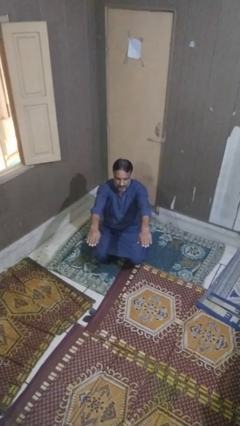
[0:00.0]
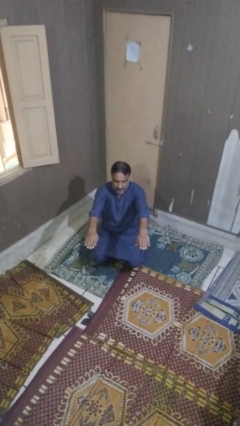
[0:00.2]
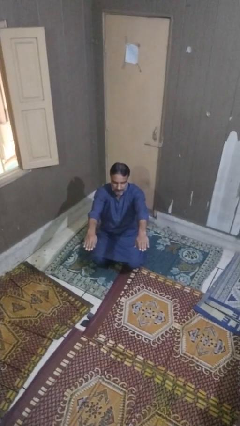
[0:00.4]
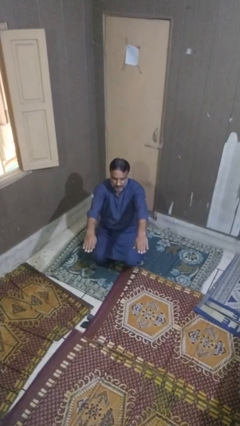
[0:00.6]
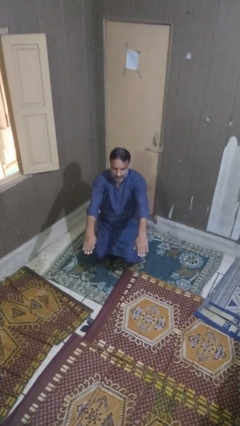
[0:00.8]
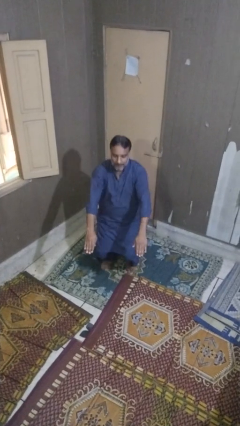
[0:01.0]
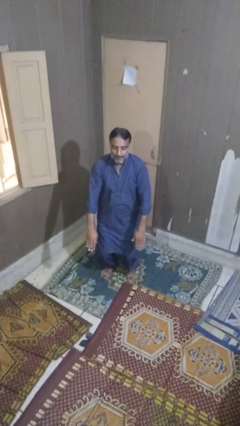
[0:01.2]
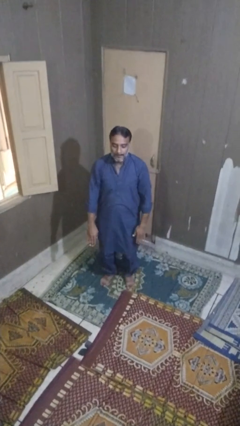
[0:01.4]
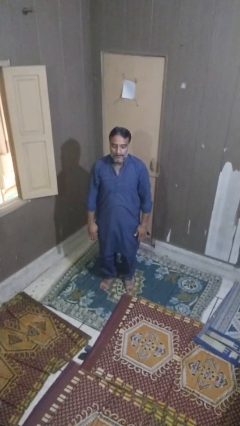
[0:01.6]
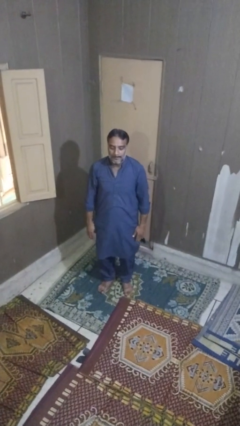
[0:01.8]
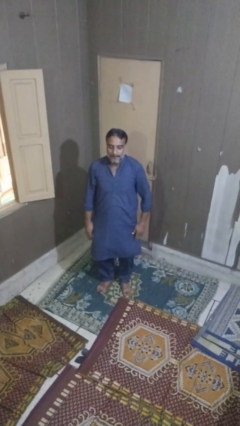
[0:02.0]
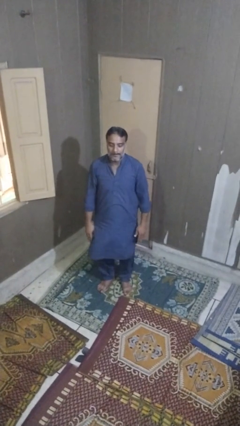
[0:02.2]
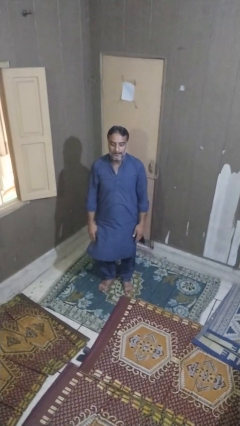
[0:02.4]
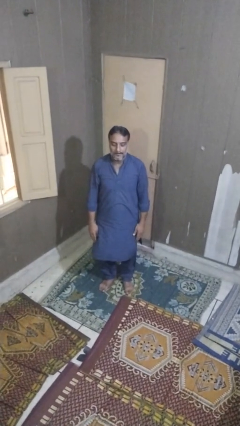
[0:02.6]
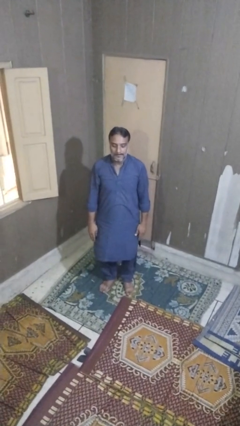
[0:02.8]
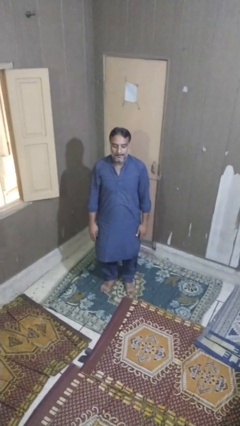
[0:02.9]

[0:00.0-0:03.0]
person stands up

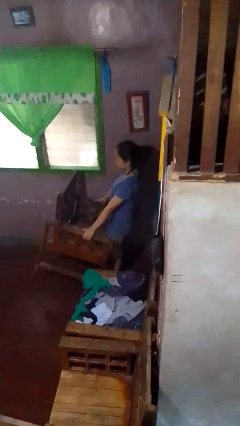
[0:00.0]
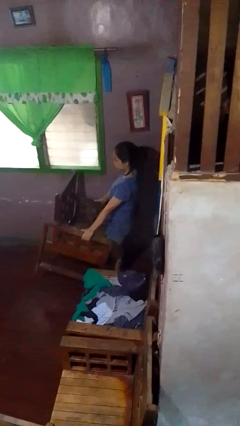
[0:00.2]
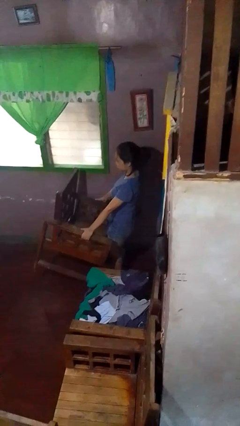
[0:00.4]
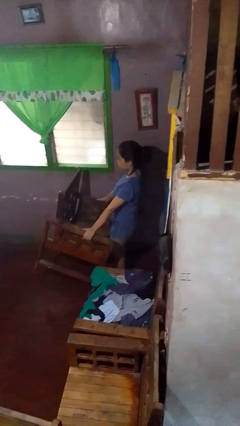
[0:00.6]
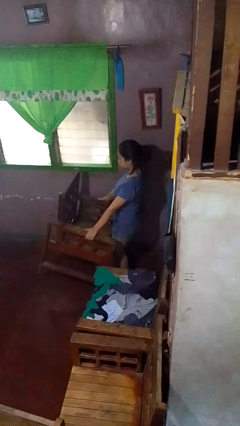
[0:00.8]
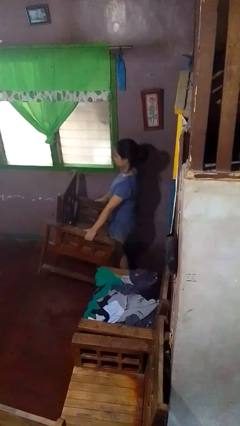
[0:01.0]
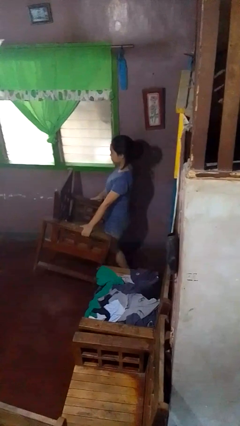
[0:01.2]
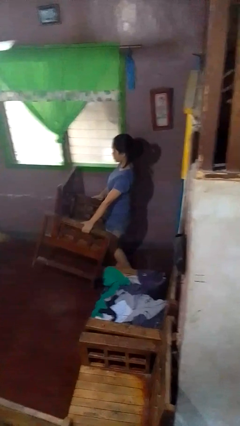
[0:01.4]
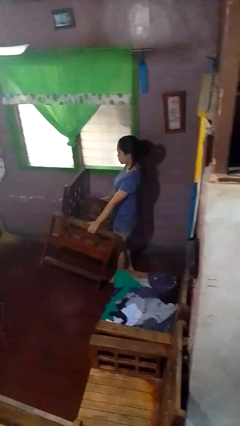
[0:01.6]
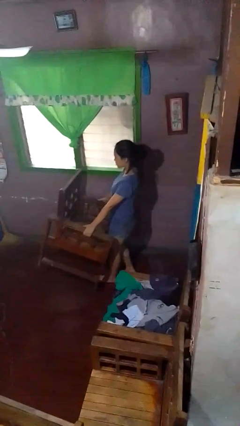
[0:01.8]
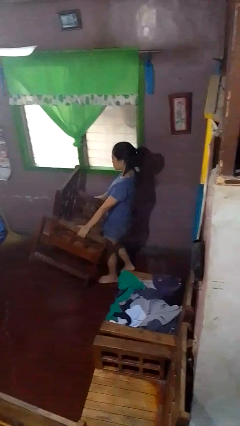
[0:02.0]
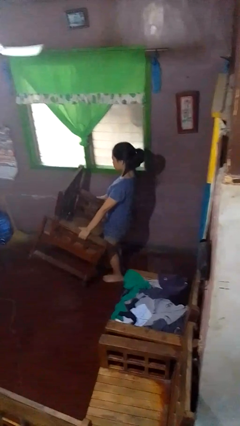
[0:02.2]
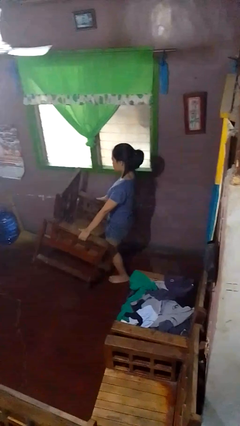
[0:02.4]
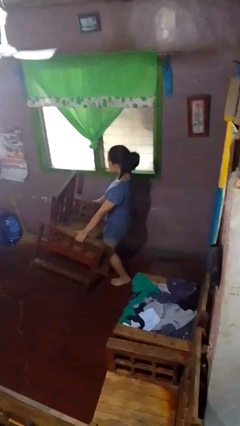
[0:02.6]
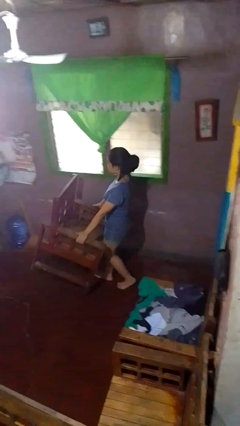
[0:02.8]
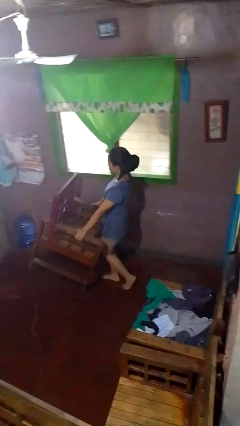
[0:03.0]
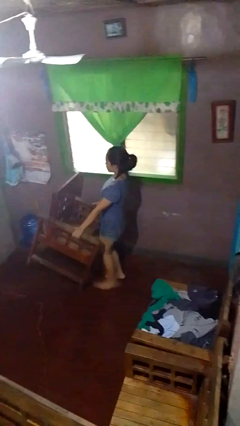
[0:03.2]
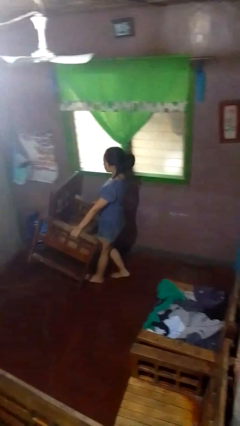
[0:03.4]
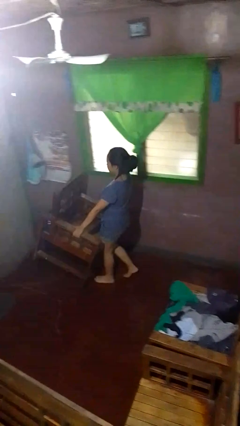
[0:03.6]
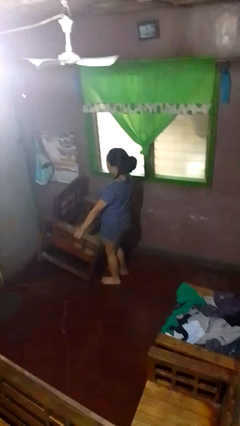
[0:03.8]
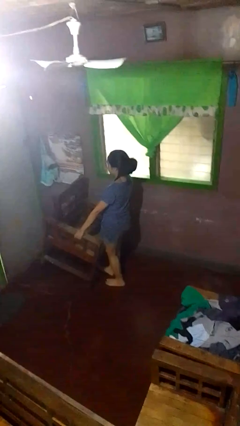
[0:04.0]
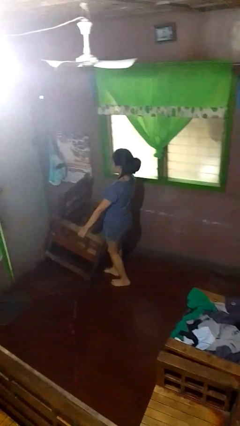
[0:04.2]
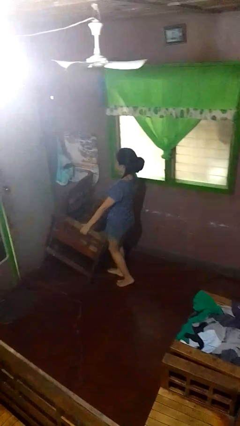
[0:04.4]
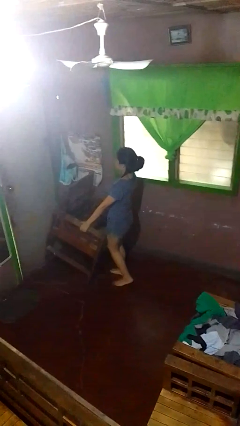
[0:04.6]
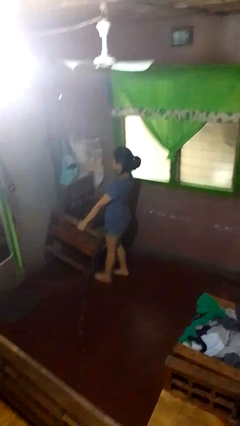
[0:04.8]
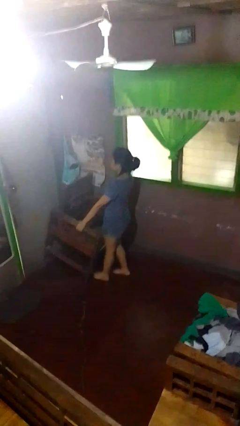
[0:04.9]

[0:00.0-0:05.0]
person carries furniture

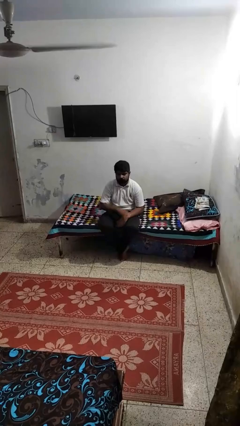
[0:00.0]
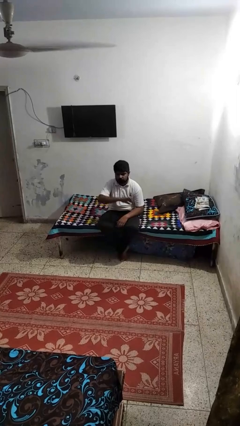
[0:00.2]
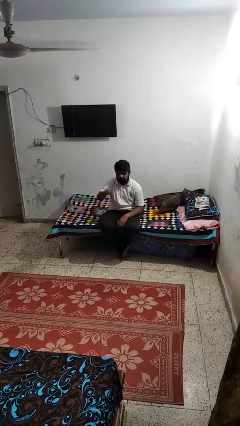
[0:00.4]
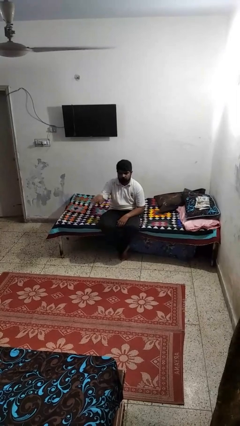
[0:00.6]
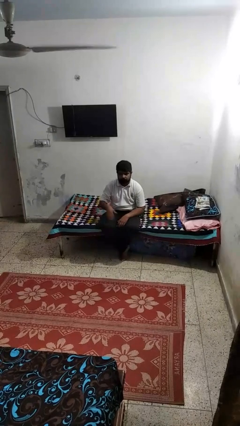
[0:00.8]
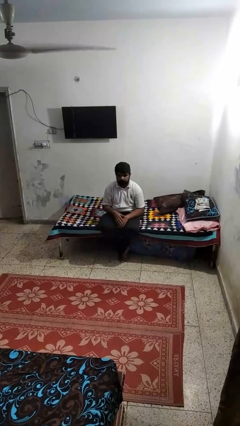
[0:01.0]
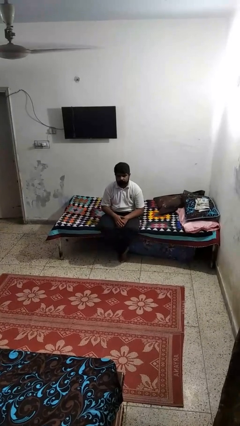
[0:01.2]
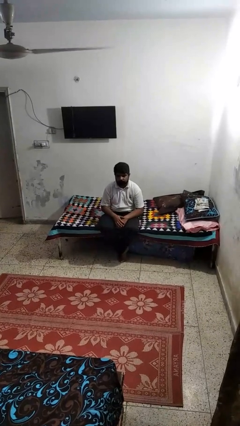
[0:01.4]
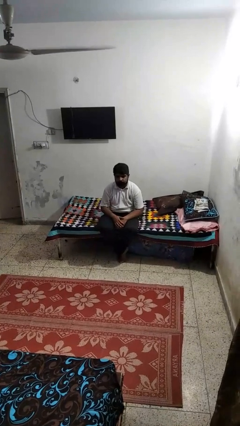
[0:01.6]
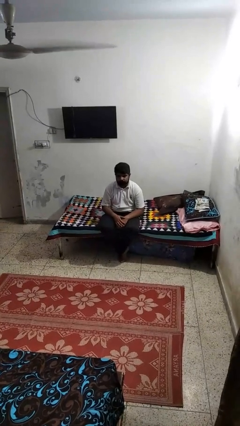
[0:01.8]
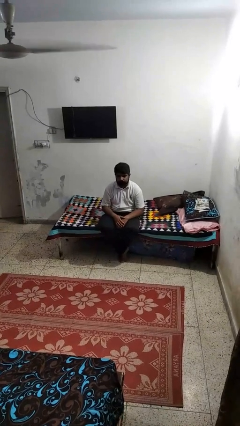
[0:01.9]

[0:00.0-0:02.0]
person gestures swipe right

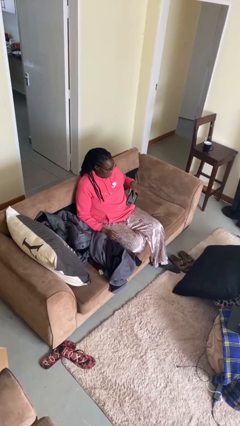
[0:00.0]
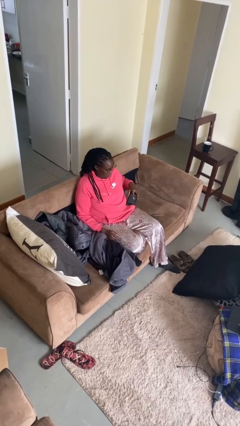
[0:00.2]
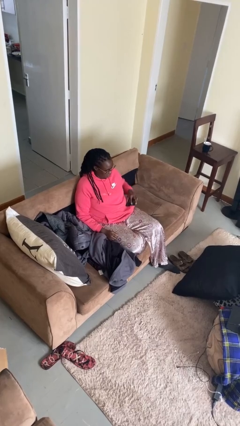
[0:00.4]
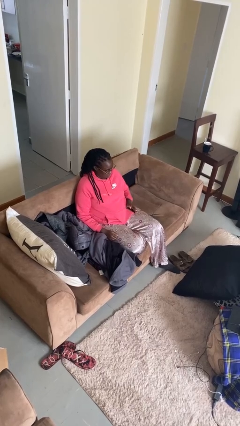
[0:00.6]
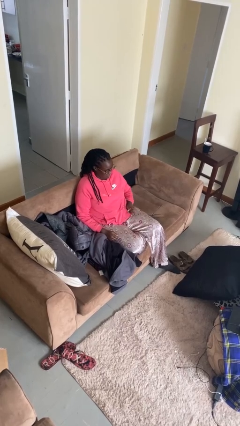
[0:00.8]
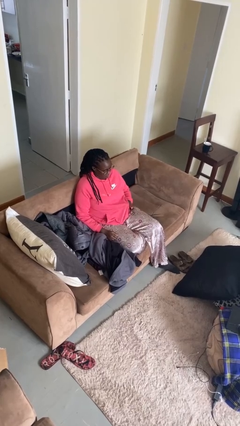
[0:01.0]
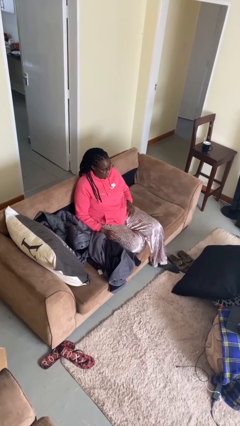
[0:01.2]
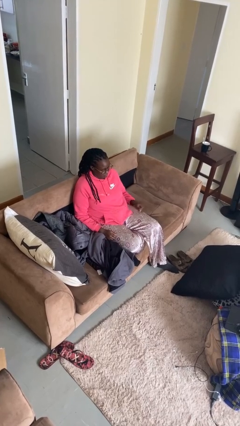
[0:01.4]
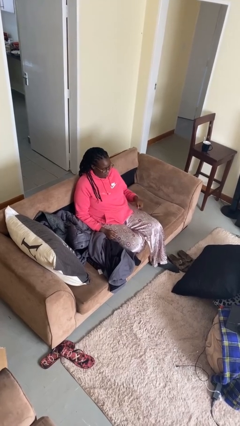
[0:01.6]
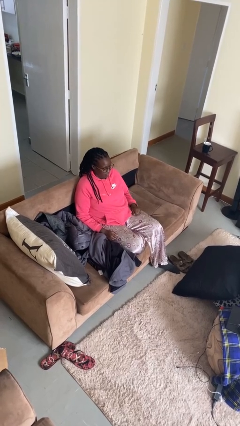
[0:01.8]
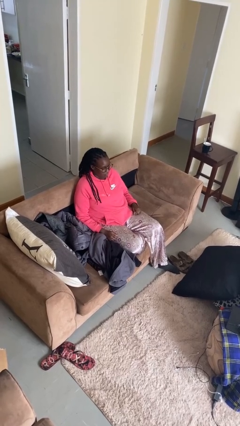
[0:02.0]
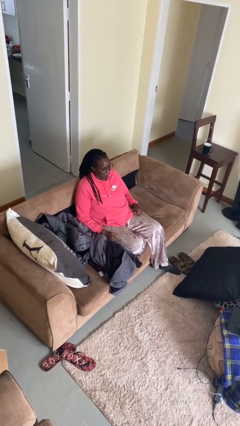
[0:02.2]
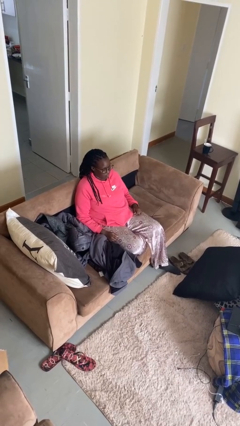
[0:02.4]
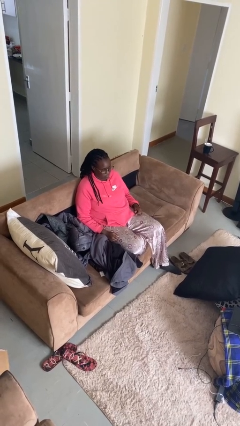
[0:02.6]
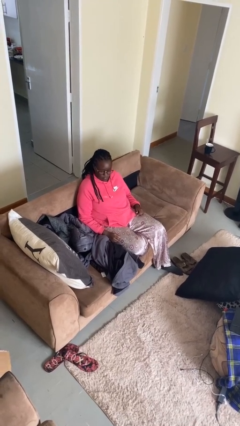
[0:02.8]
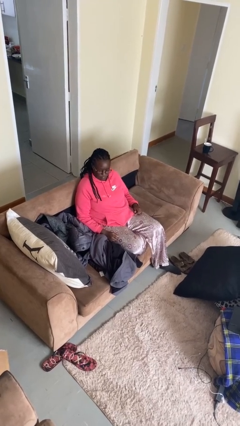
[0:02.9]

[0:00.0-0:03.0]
person puts phone into pocket

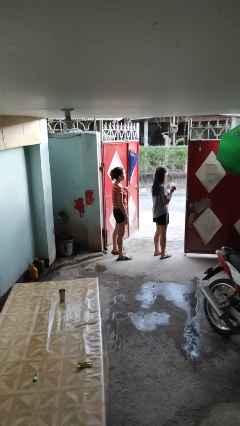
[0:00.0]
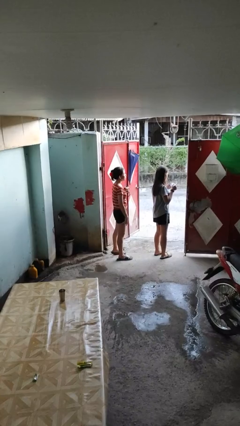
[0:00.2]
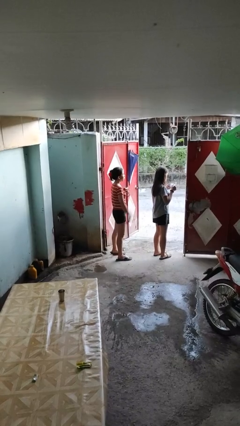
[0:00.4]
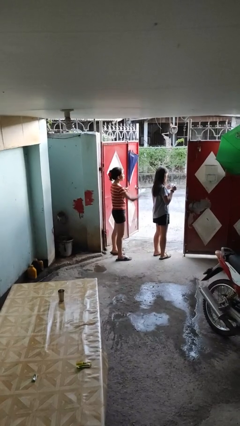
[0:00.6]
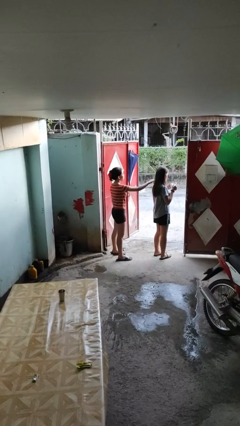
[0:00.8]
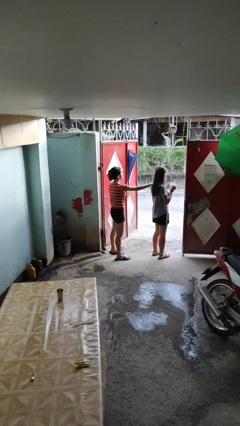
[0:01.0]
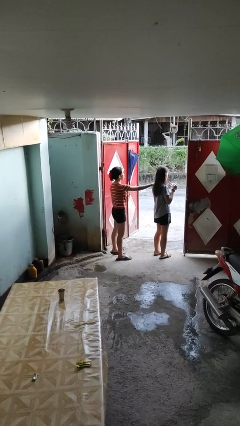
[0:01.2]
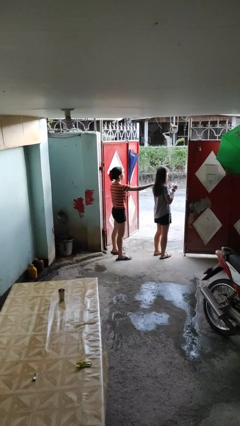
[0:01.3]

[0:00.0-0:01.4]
person grabs person by shoulder

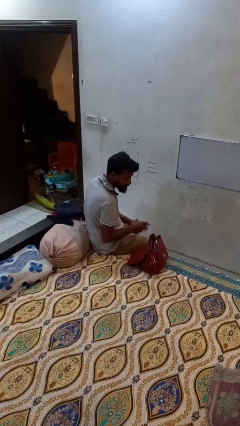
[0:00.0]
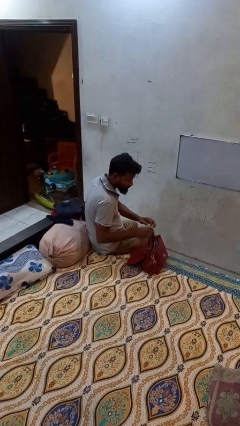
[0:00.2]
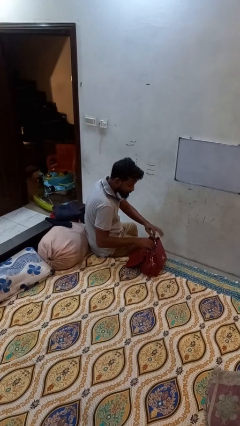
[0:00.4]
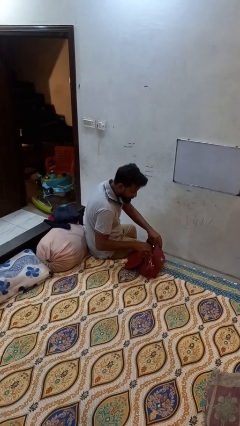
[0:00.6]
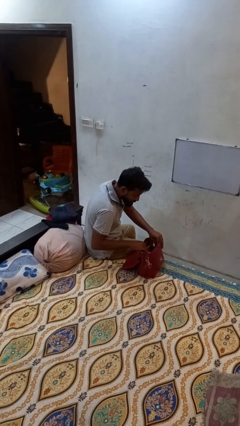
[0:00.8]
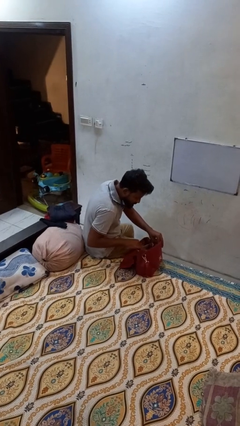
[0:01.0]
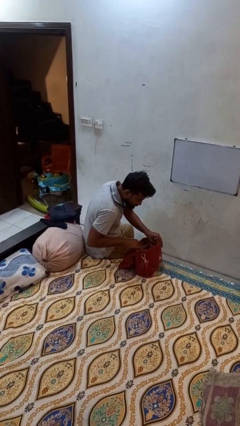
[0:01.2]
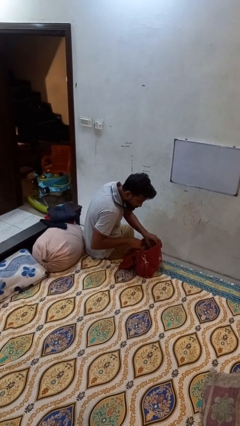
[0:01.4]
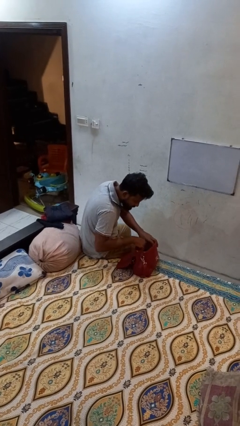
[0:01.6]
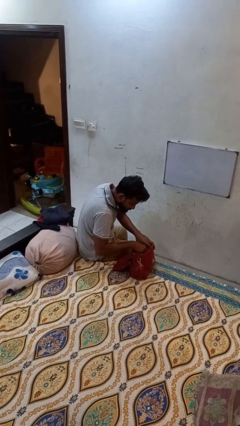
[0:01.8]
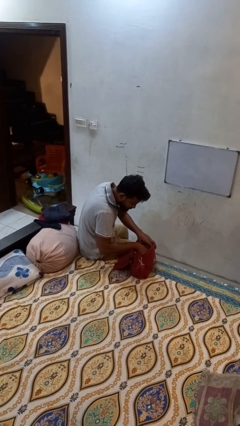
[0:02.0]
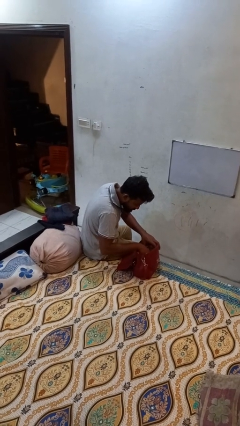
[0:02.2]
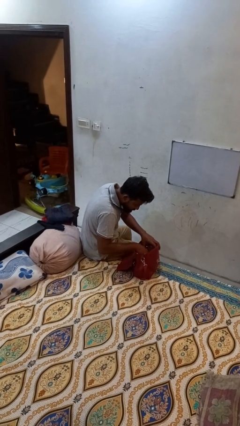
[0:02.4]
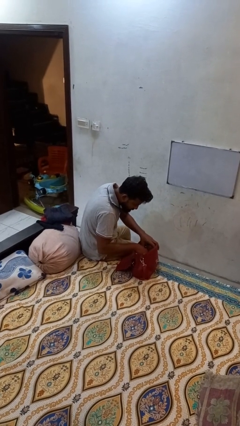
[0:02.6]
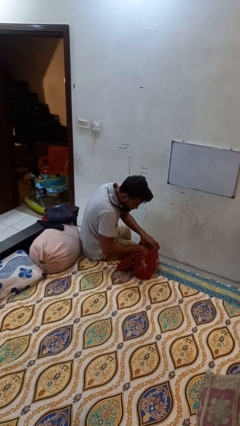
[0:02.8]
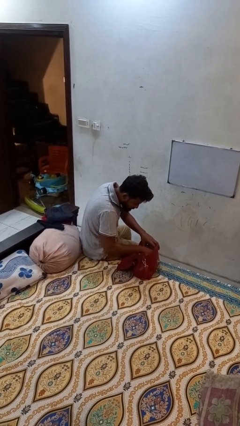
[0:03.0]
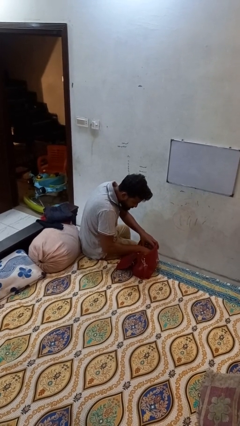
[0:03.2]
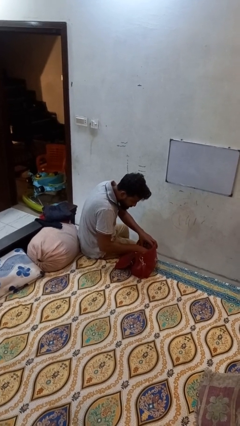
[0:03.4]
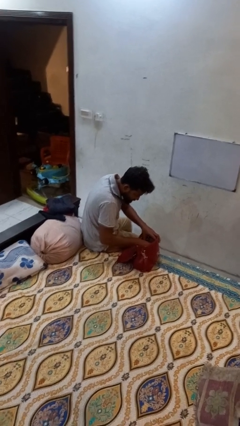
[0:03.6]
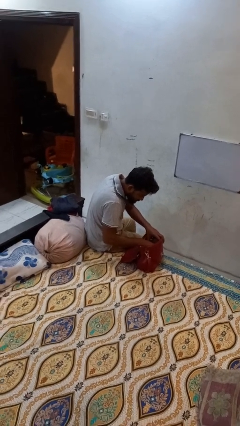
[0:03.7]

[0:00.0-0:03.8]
person searches in purse
